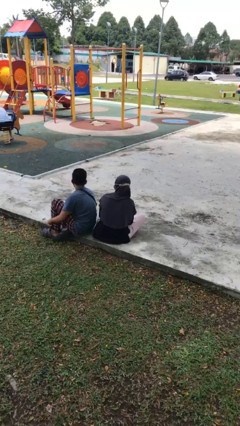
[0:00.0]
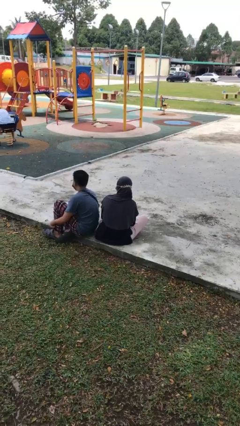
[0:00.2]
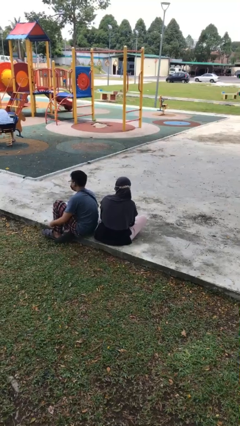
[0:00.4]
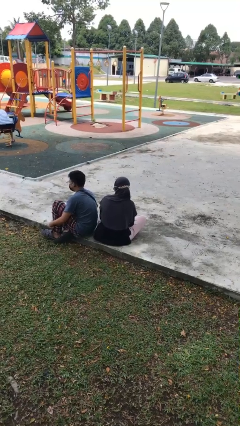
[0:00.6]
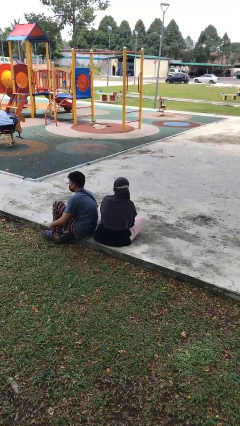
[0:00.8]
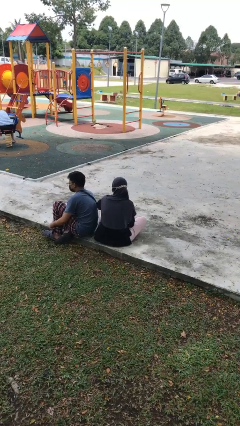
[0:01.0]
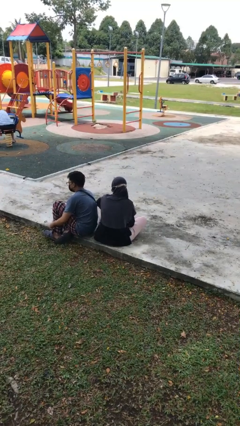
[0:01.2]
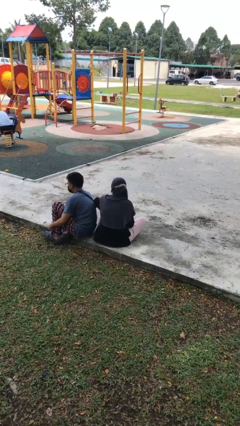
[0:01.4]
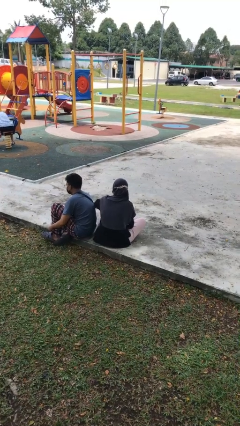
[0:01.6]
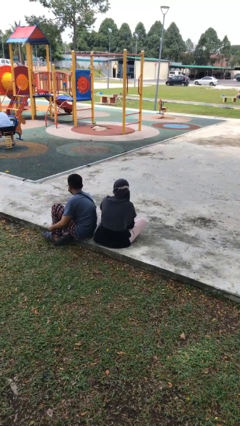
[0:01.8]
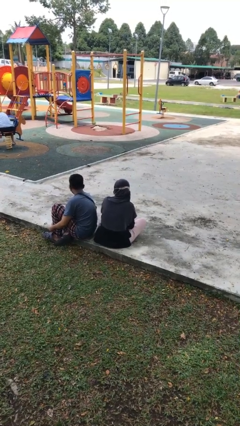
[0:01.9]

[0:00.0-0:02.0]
person nudges person with elbow

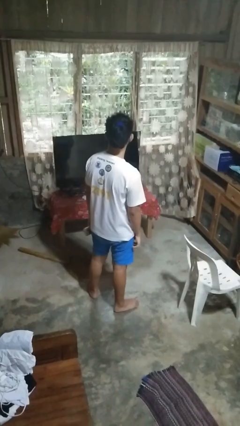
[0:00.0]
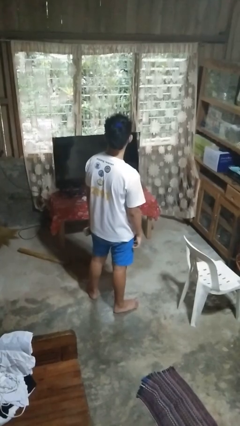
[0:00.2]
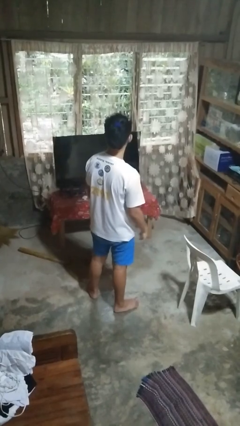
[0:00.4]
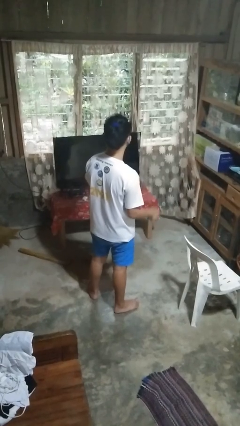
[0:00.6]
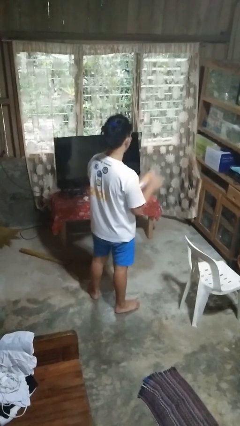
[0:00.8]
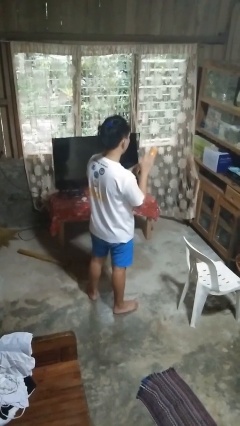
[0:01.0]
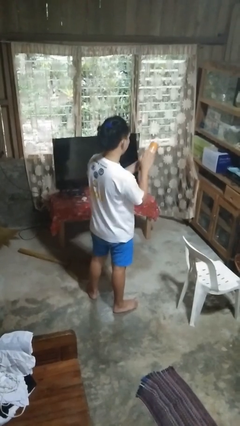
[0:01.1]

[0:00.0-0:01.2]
person taps object with finger

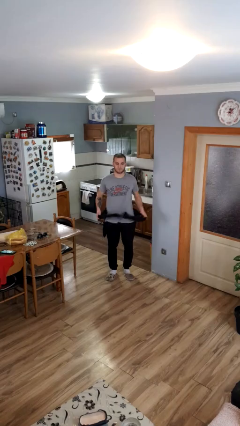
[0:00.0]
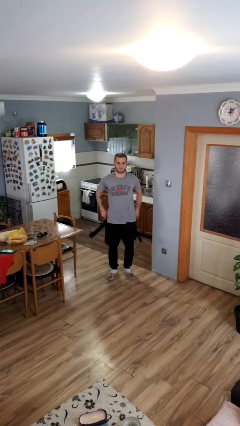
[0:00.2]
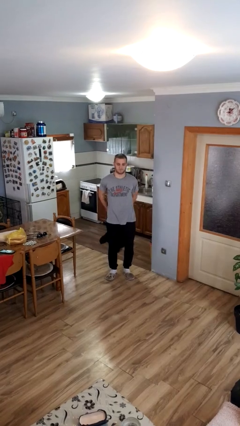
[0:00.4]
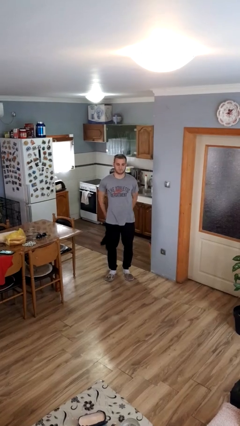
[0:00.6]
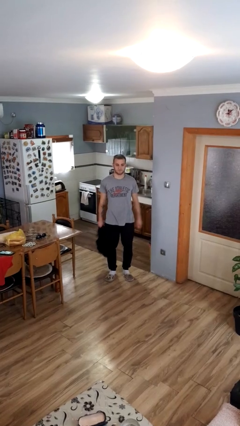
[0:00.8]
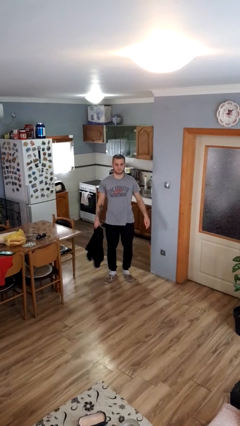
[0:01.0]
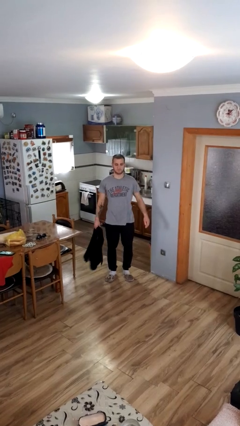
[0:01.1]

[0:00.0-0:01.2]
person unties jacket around waist

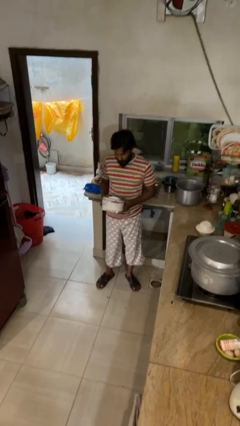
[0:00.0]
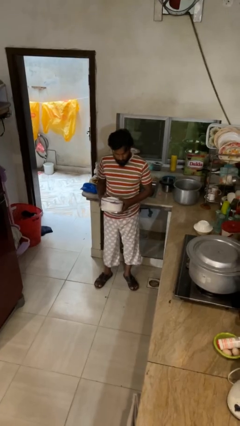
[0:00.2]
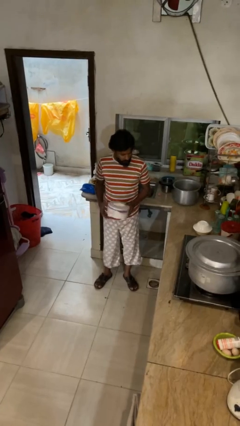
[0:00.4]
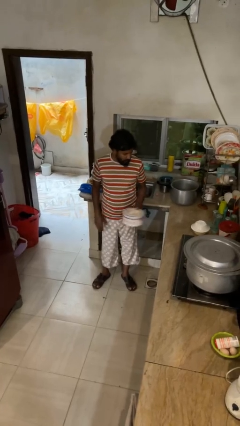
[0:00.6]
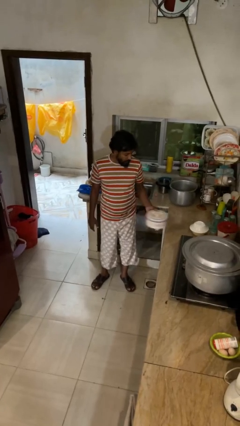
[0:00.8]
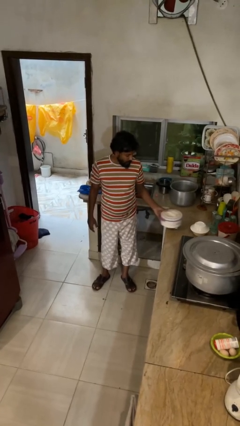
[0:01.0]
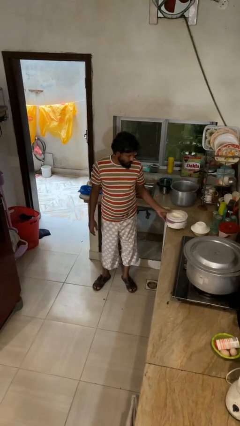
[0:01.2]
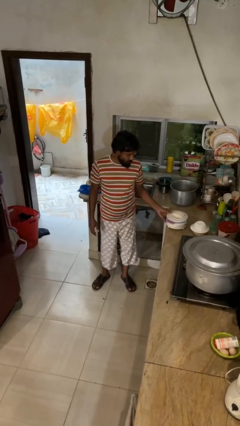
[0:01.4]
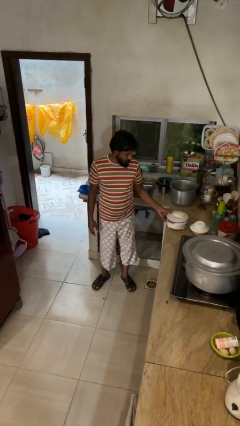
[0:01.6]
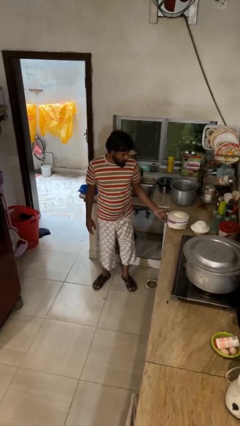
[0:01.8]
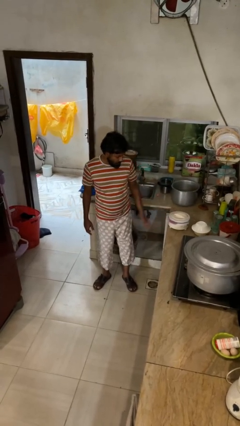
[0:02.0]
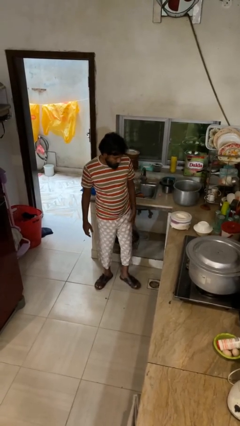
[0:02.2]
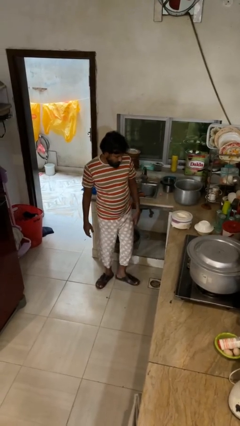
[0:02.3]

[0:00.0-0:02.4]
person puts down object on countertop

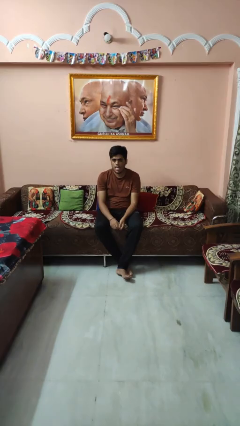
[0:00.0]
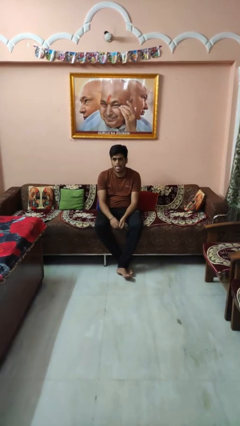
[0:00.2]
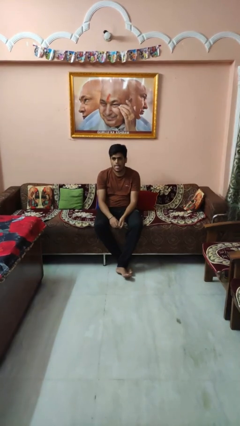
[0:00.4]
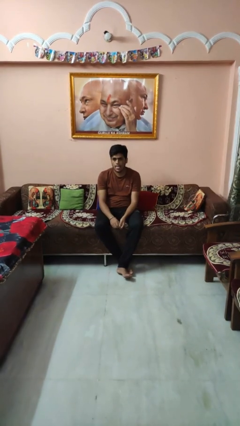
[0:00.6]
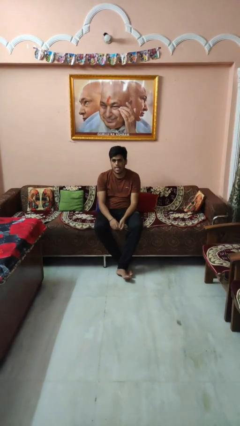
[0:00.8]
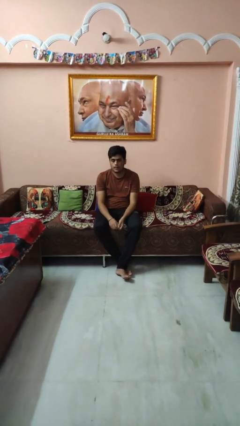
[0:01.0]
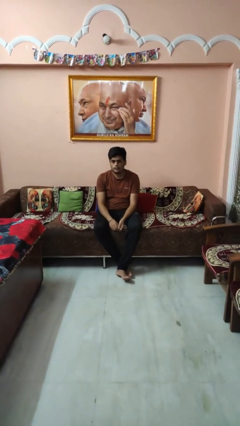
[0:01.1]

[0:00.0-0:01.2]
person sticks out tongue

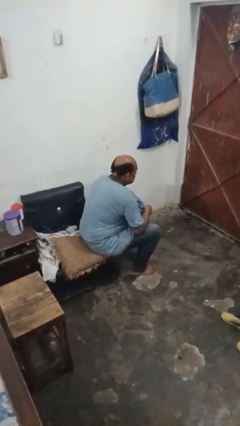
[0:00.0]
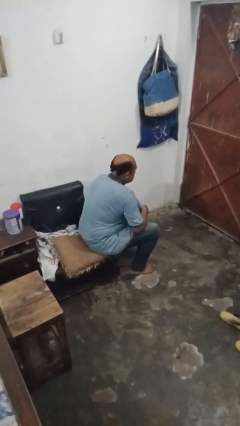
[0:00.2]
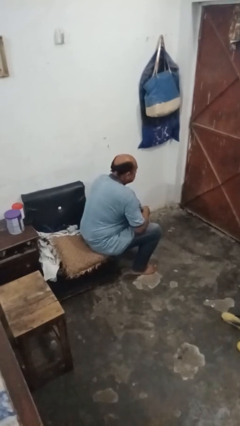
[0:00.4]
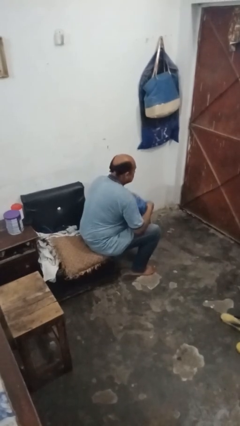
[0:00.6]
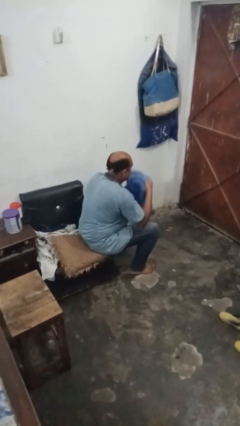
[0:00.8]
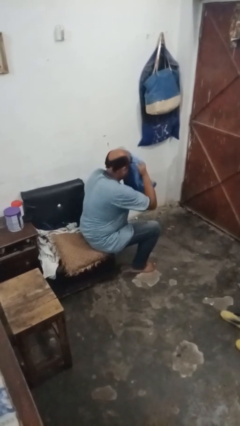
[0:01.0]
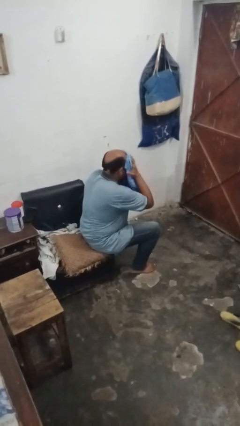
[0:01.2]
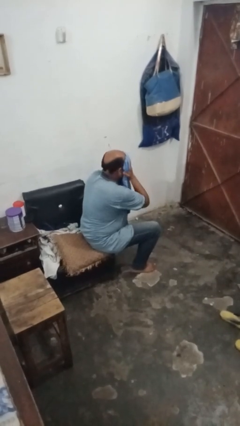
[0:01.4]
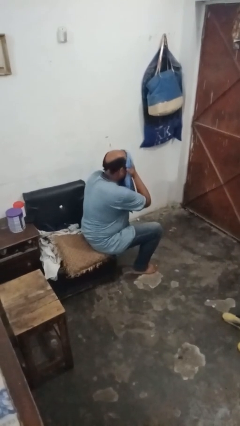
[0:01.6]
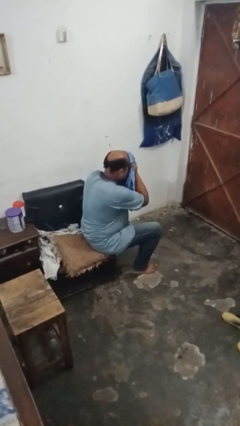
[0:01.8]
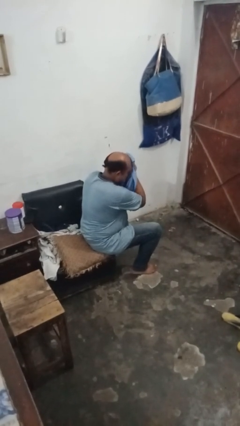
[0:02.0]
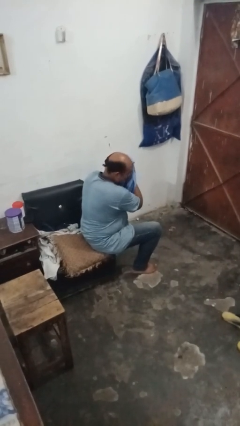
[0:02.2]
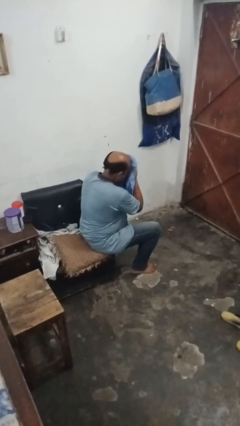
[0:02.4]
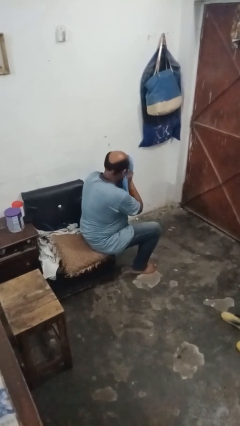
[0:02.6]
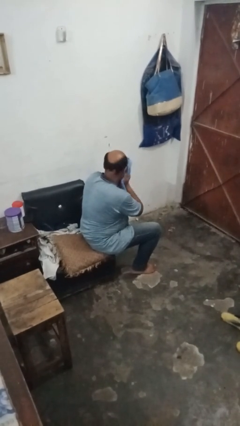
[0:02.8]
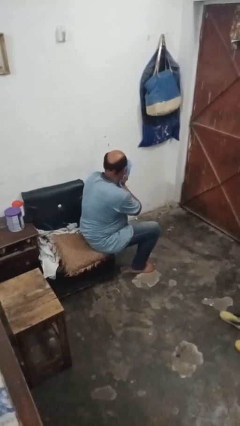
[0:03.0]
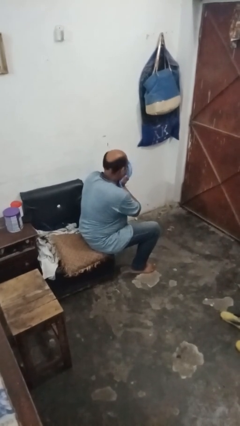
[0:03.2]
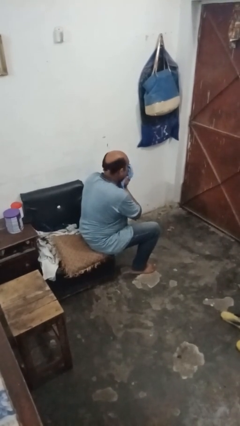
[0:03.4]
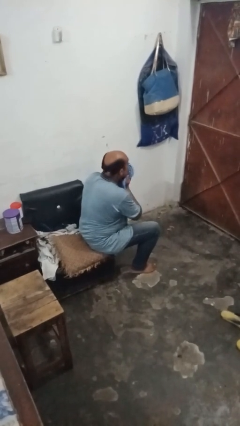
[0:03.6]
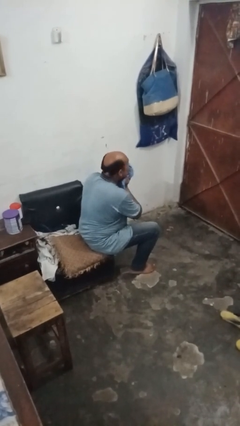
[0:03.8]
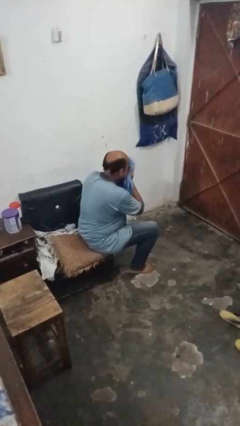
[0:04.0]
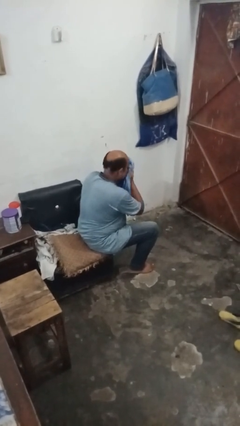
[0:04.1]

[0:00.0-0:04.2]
person wipes mouth with napkin

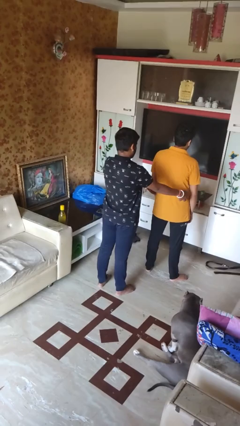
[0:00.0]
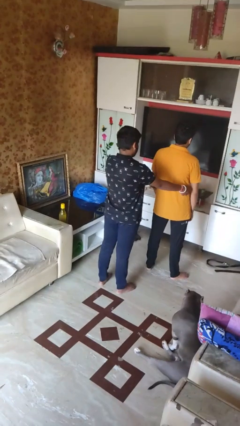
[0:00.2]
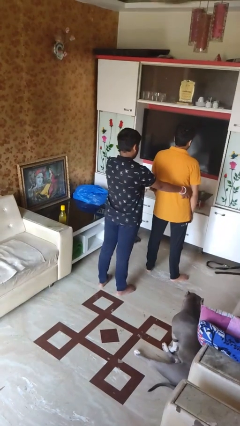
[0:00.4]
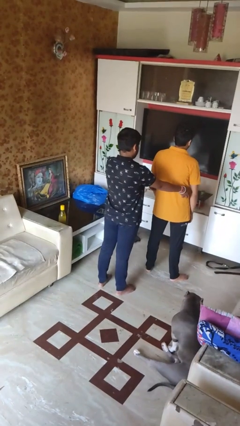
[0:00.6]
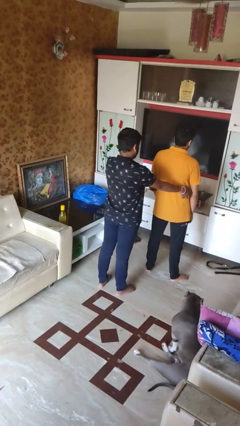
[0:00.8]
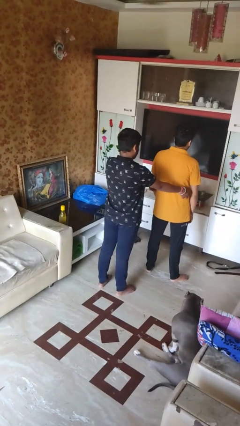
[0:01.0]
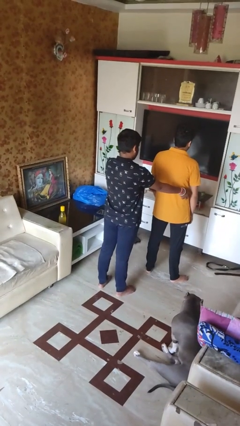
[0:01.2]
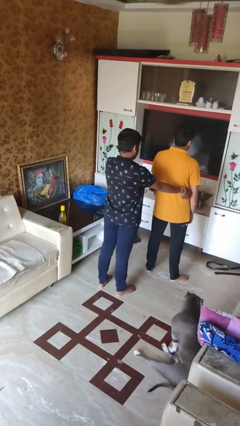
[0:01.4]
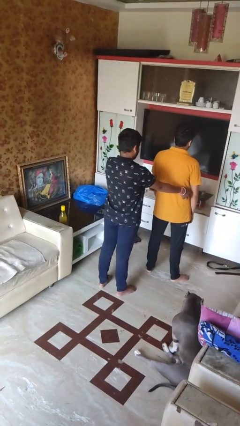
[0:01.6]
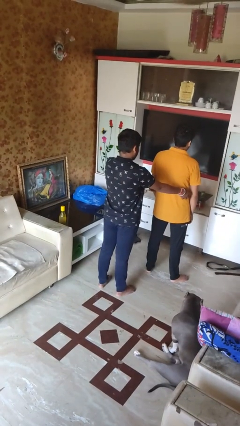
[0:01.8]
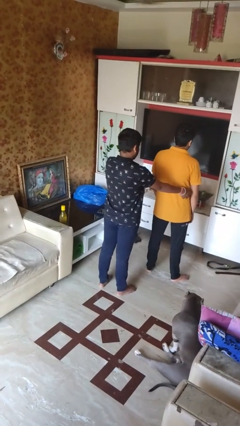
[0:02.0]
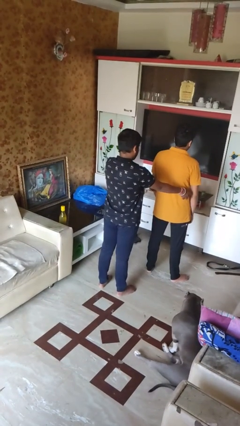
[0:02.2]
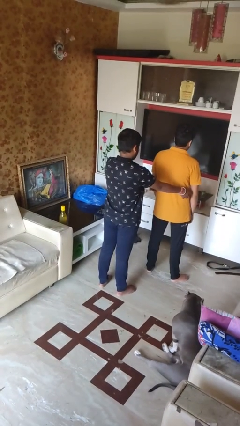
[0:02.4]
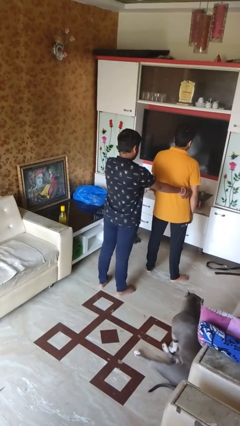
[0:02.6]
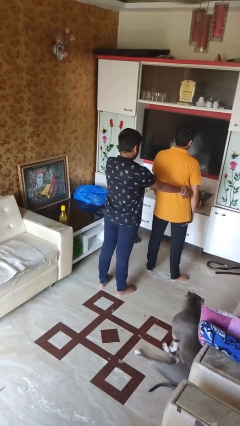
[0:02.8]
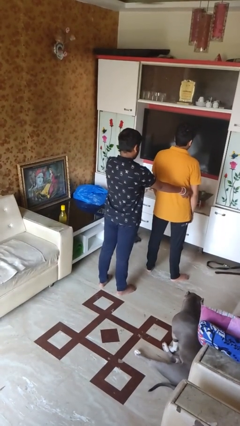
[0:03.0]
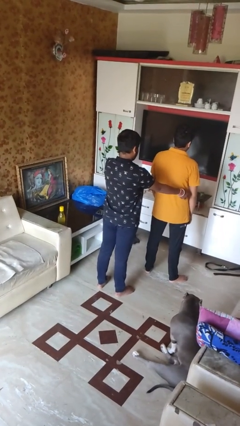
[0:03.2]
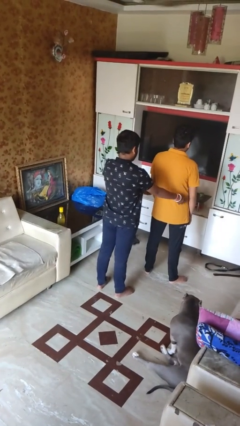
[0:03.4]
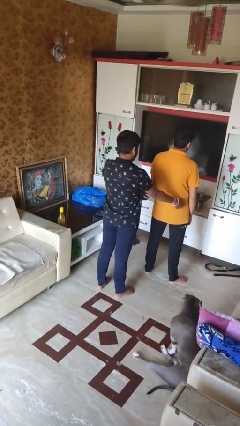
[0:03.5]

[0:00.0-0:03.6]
person tickles person

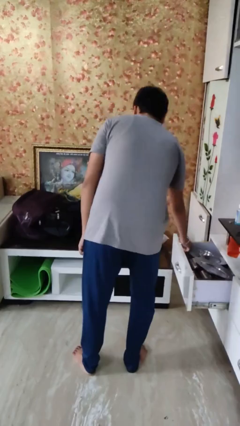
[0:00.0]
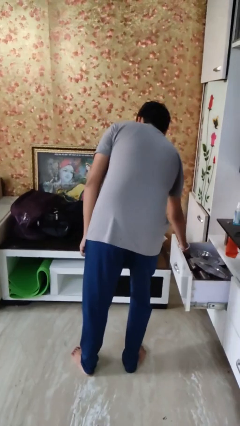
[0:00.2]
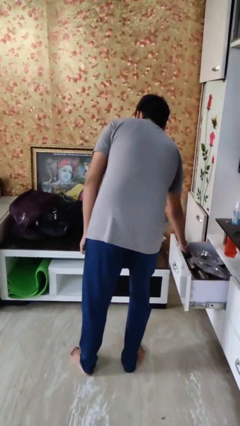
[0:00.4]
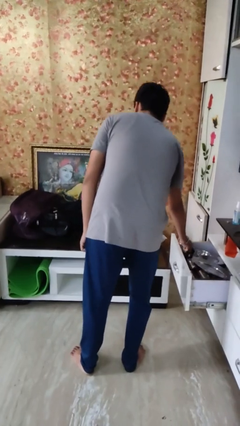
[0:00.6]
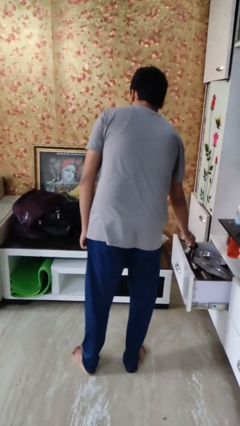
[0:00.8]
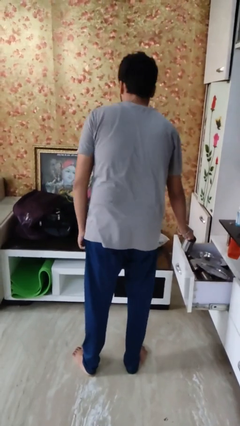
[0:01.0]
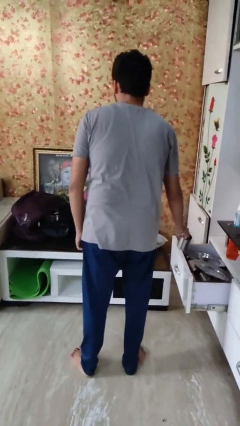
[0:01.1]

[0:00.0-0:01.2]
person takes object from kitchen drawer
